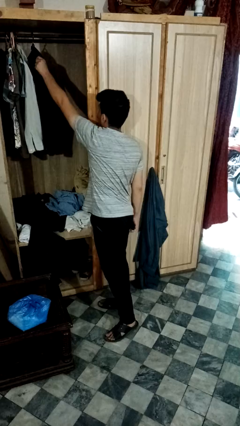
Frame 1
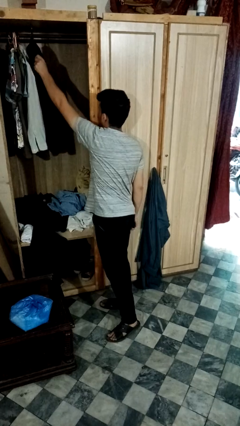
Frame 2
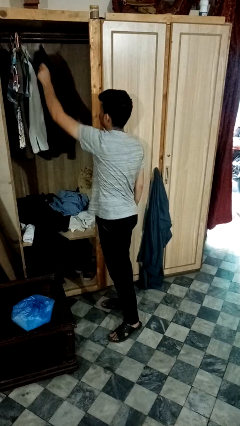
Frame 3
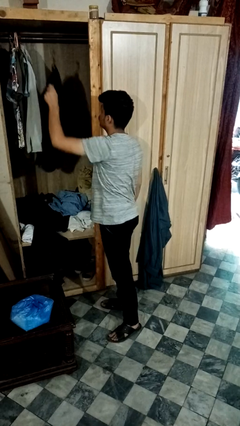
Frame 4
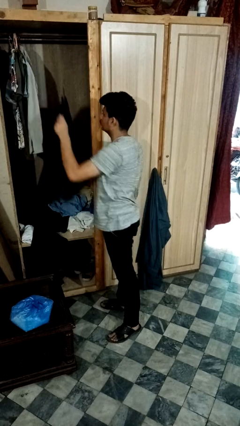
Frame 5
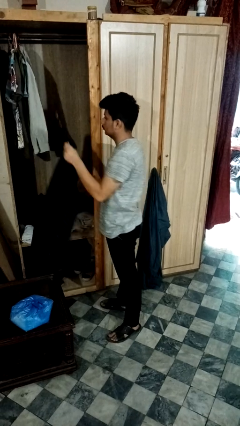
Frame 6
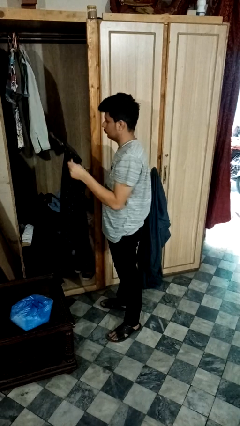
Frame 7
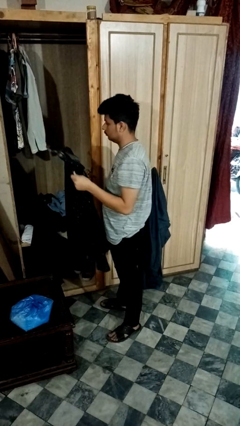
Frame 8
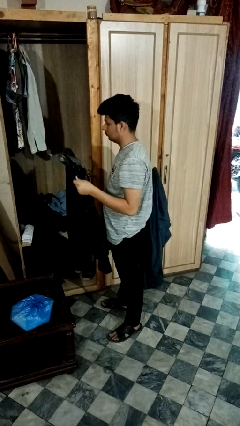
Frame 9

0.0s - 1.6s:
person takes clothes from closet

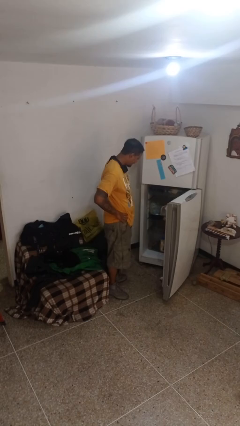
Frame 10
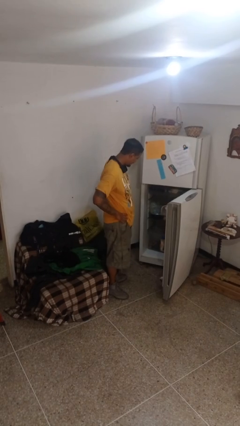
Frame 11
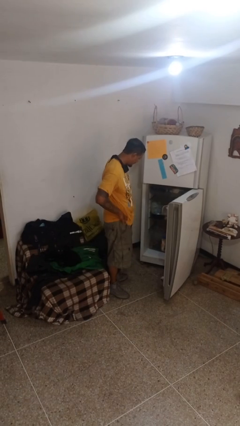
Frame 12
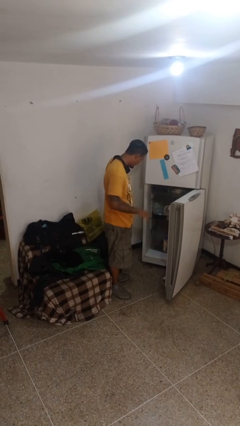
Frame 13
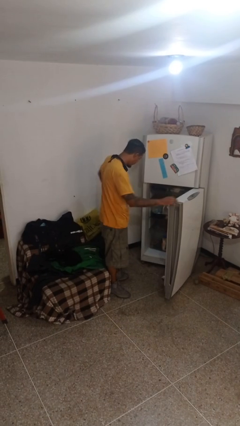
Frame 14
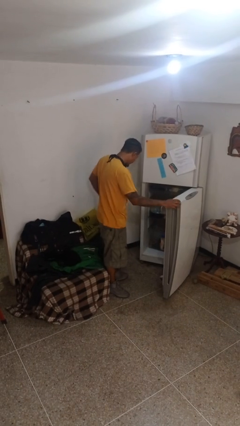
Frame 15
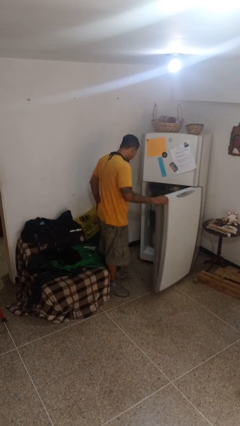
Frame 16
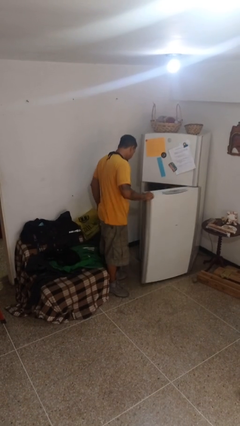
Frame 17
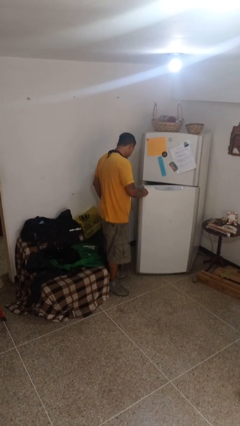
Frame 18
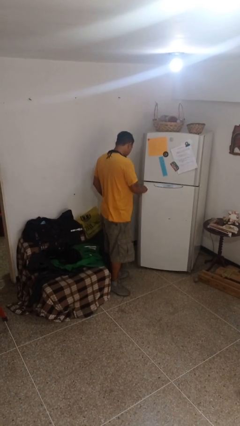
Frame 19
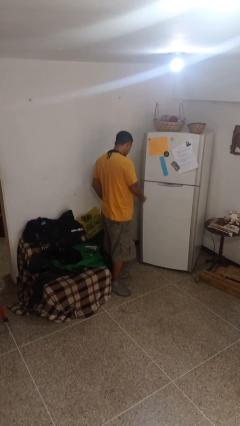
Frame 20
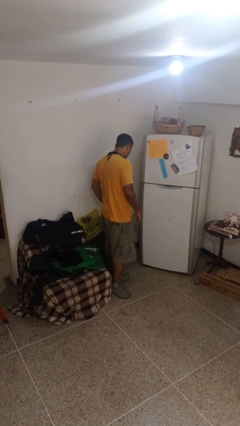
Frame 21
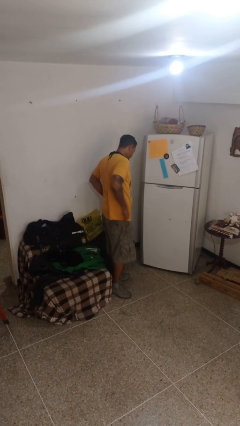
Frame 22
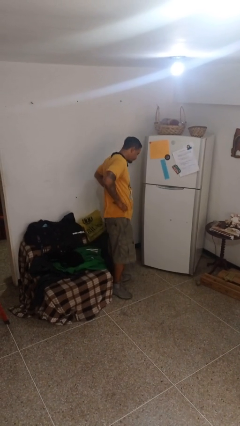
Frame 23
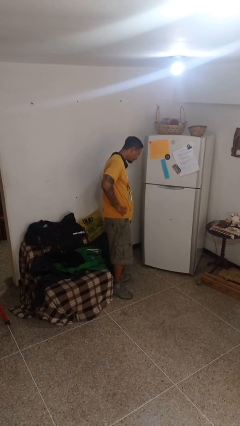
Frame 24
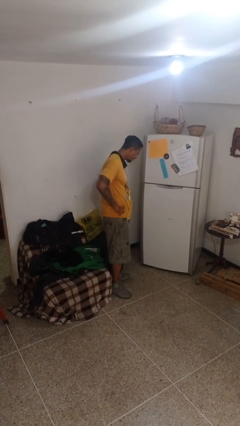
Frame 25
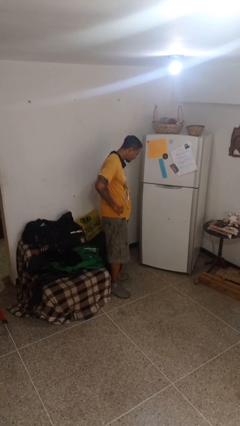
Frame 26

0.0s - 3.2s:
person closes refrigerator

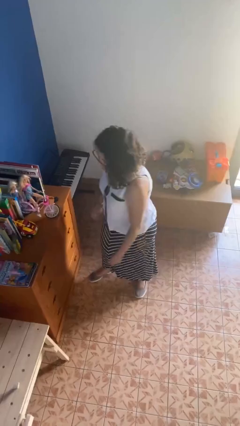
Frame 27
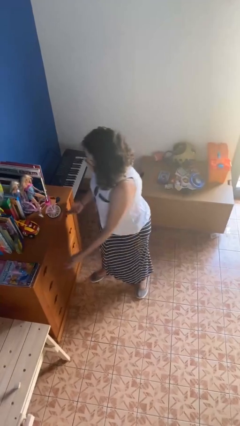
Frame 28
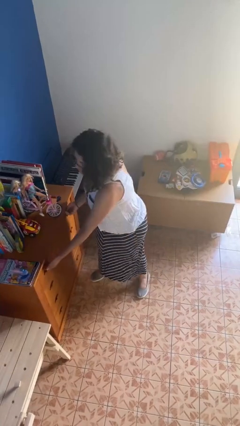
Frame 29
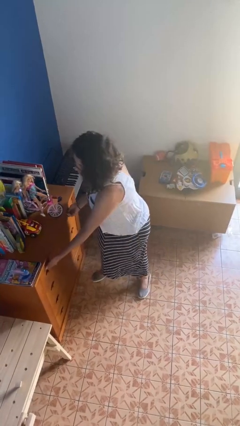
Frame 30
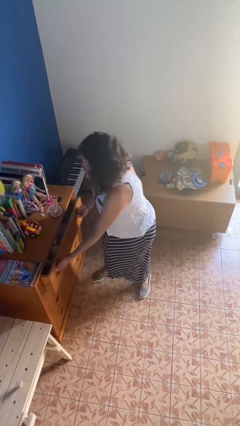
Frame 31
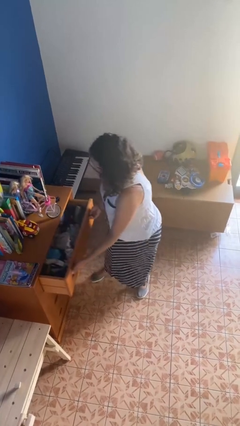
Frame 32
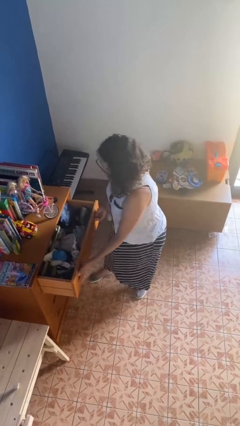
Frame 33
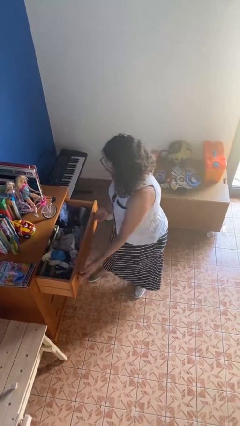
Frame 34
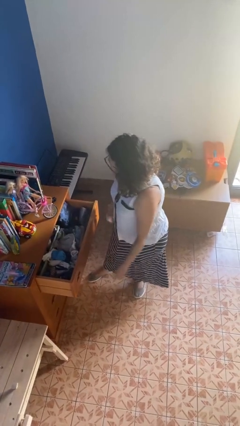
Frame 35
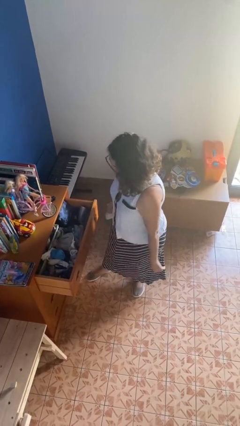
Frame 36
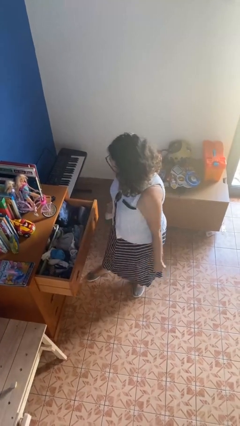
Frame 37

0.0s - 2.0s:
person opens dresser drawer

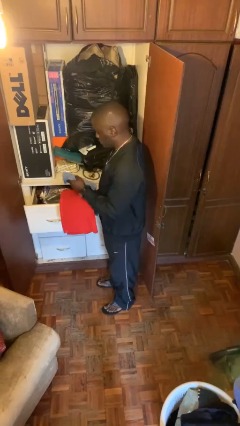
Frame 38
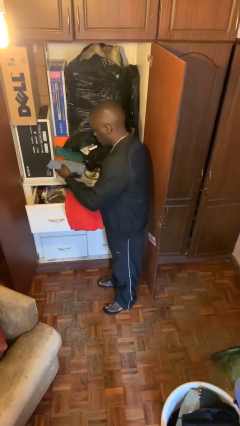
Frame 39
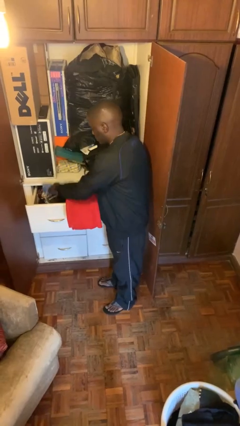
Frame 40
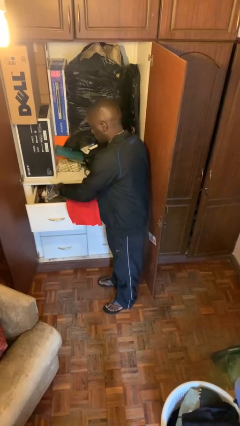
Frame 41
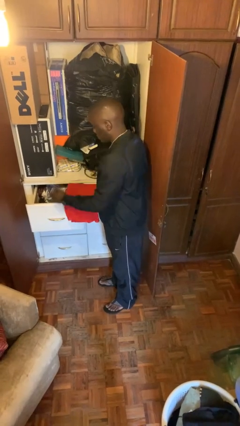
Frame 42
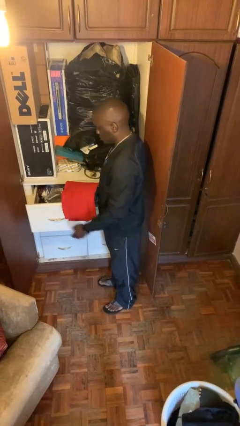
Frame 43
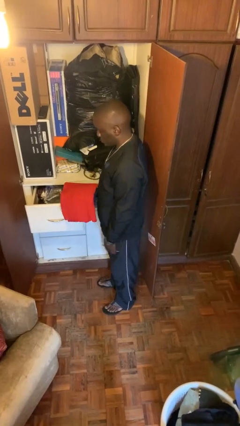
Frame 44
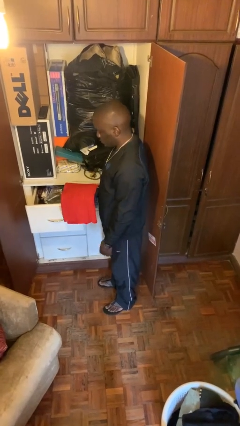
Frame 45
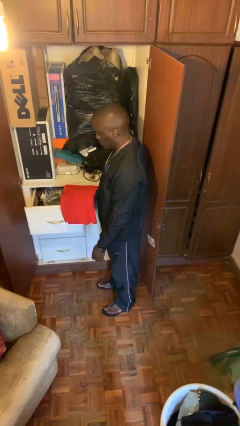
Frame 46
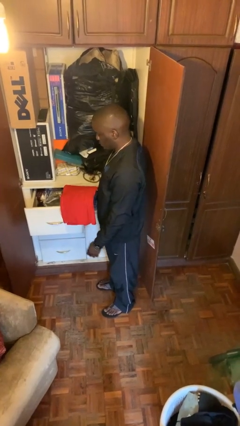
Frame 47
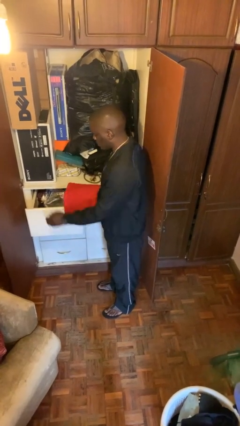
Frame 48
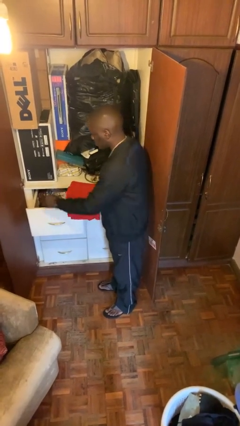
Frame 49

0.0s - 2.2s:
person puts clothes into dresser

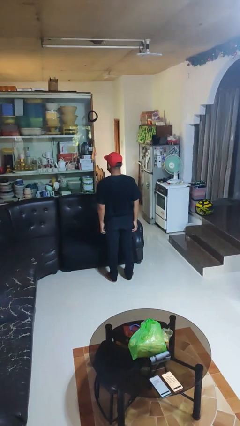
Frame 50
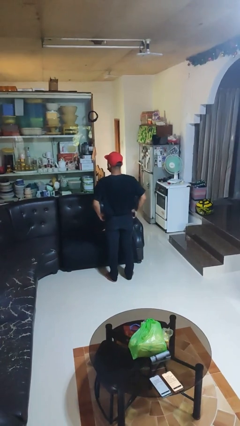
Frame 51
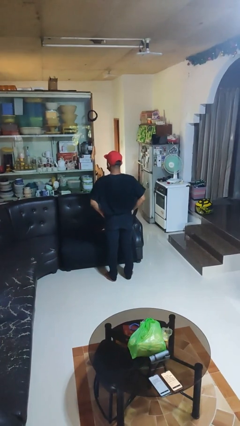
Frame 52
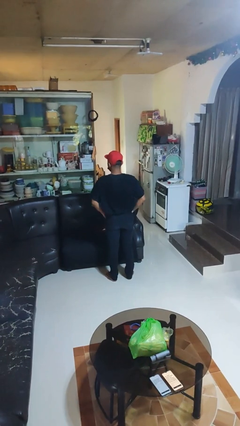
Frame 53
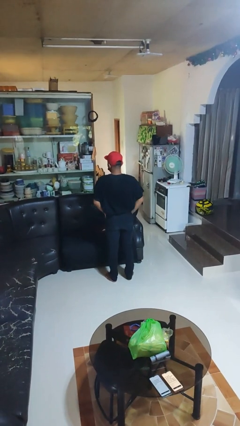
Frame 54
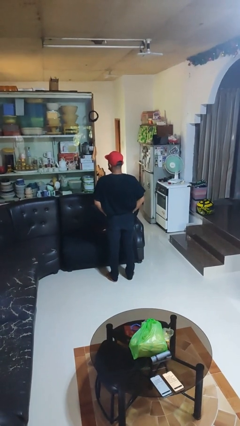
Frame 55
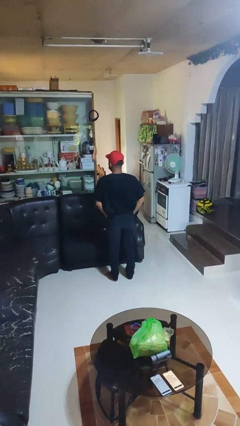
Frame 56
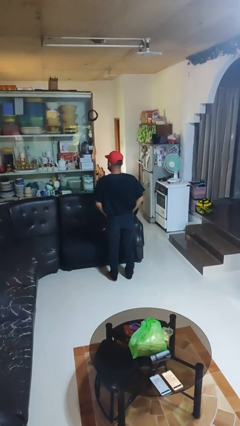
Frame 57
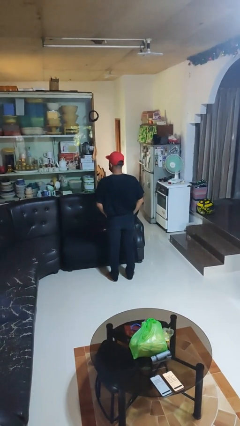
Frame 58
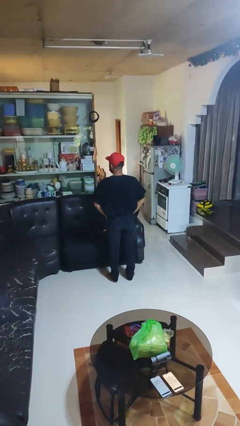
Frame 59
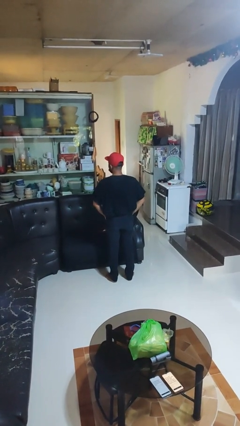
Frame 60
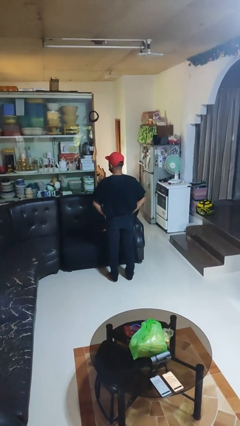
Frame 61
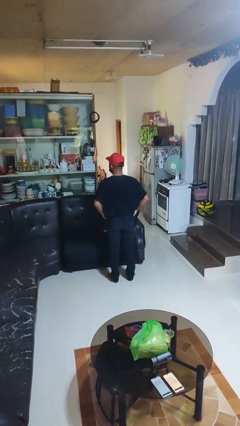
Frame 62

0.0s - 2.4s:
person puts on shirt

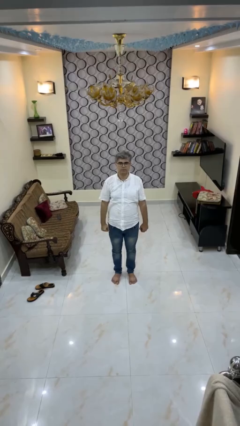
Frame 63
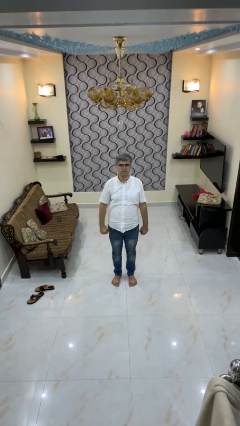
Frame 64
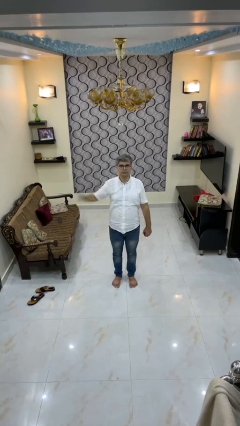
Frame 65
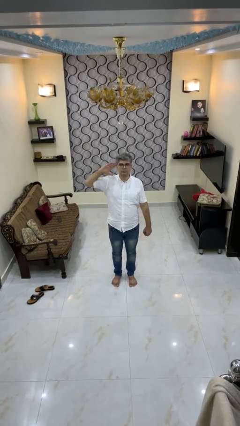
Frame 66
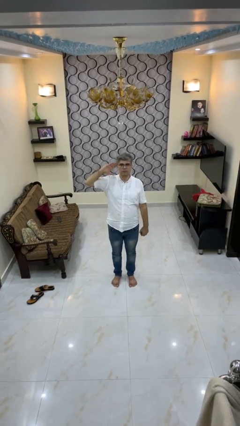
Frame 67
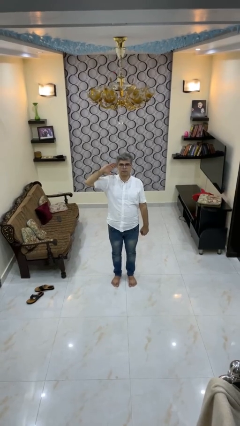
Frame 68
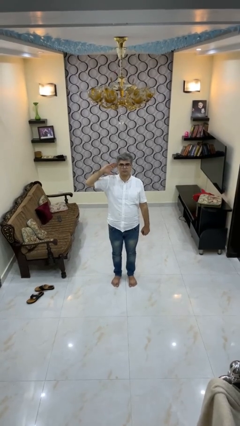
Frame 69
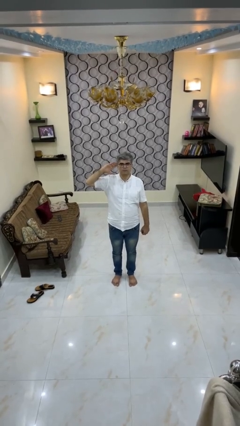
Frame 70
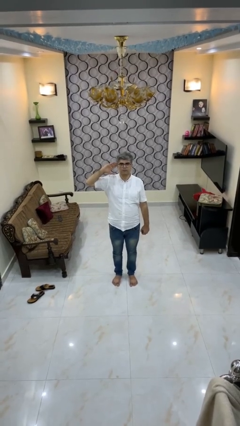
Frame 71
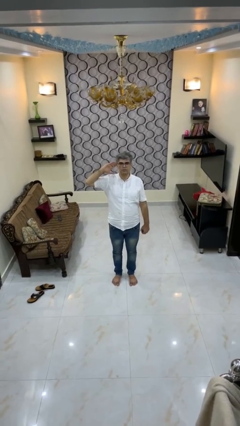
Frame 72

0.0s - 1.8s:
person salutes

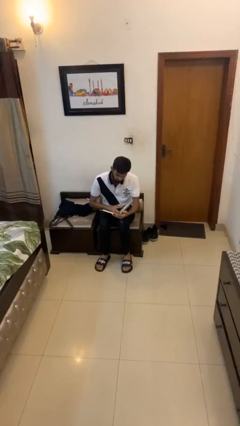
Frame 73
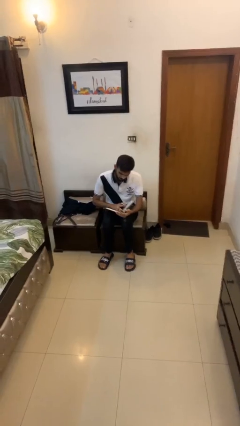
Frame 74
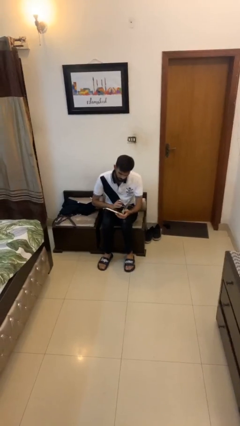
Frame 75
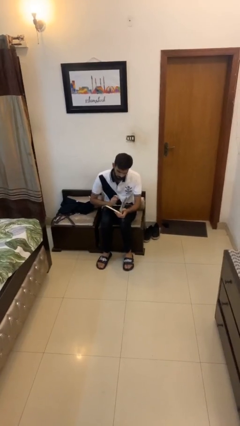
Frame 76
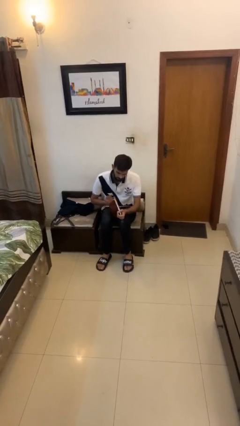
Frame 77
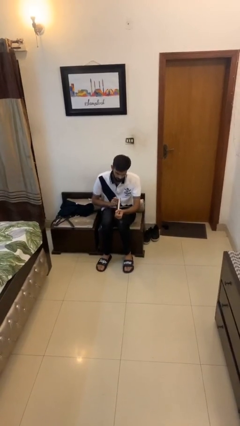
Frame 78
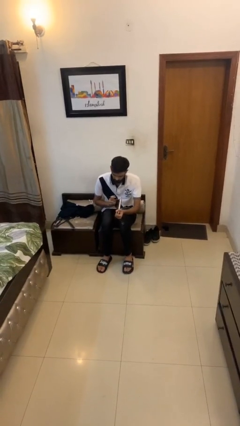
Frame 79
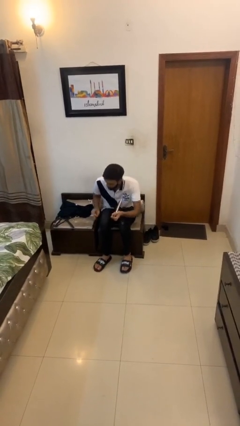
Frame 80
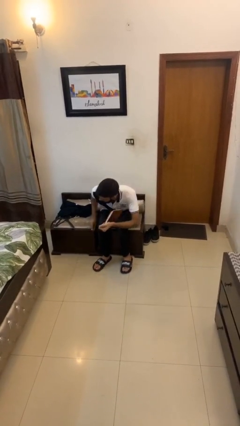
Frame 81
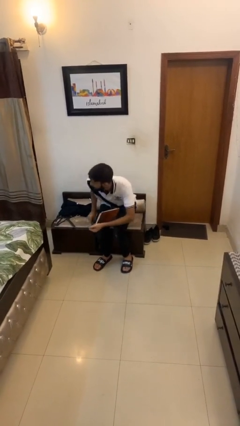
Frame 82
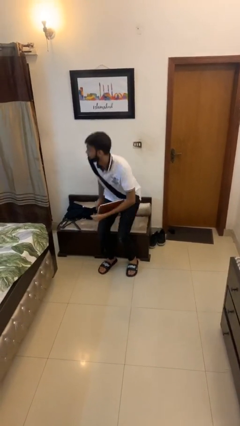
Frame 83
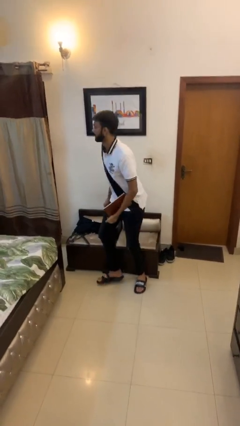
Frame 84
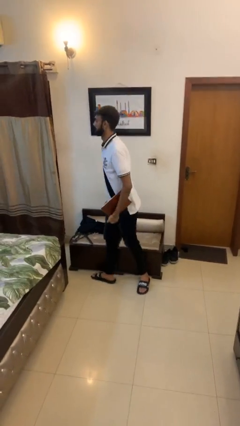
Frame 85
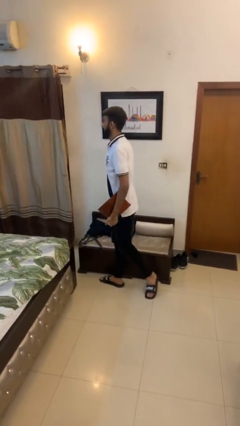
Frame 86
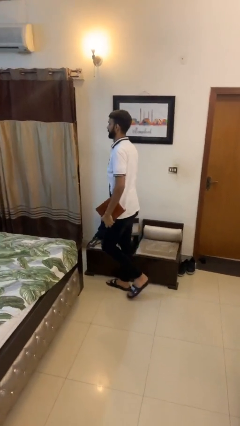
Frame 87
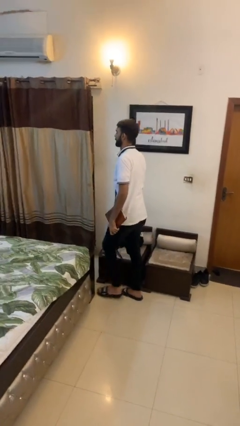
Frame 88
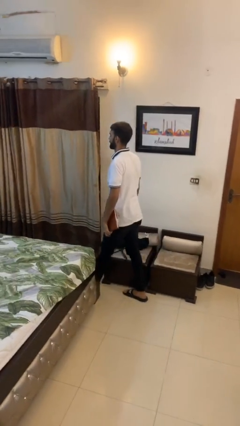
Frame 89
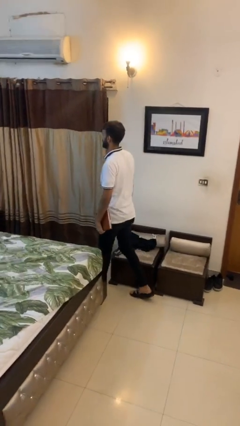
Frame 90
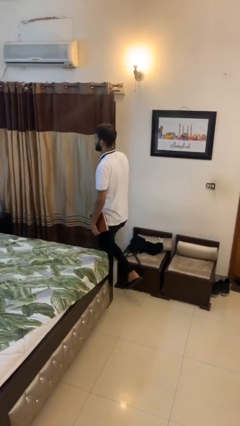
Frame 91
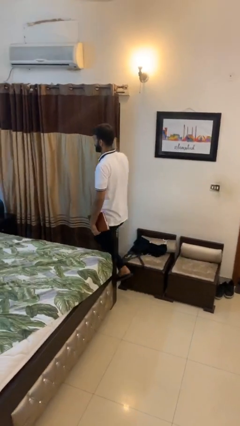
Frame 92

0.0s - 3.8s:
person stands up
